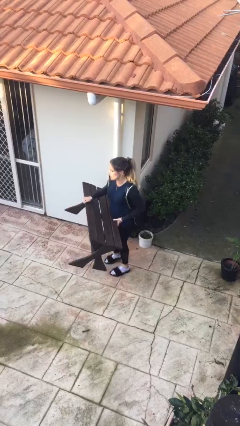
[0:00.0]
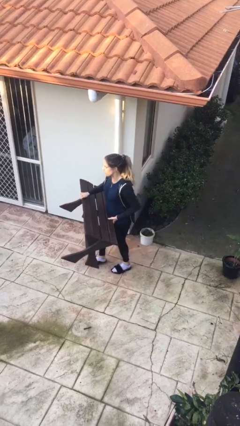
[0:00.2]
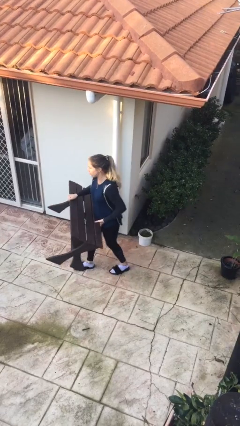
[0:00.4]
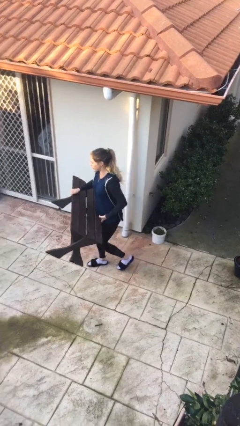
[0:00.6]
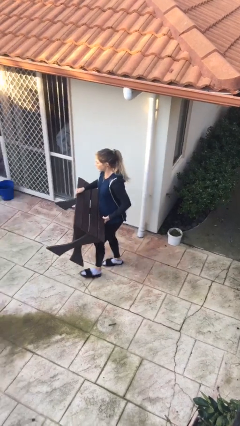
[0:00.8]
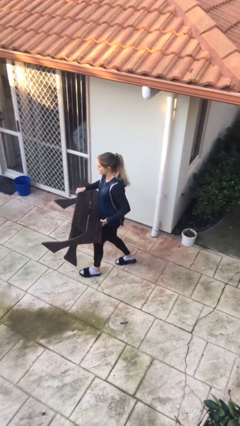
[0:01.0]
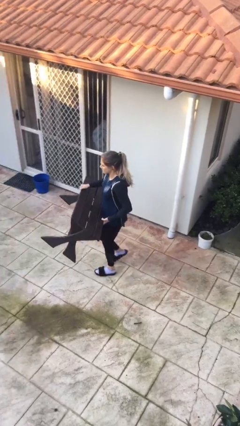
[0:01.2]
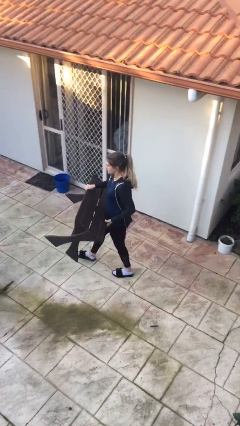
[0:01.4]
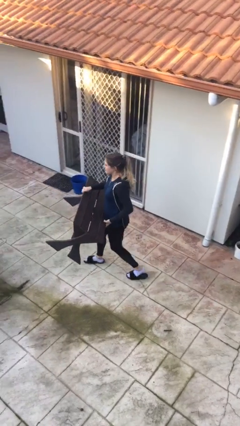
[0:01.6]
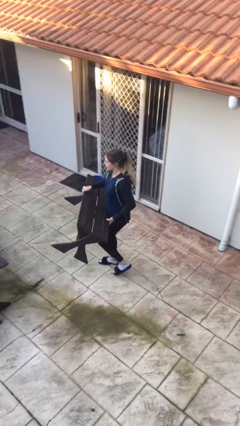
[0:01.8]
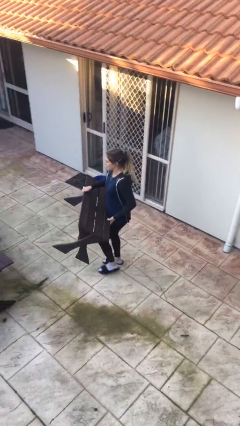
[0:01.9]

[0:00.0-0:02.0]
person carries heavy object

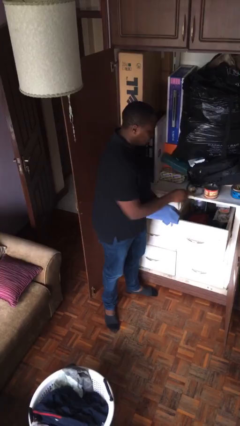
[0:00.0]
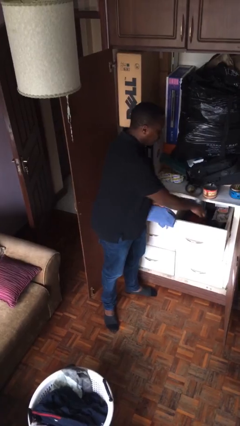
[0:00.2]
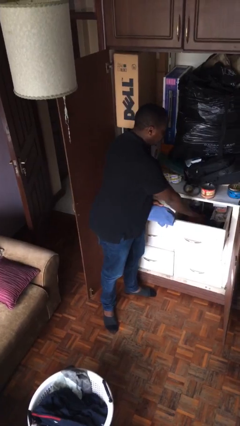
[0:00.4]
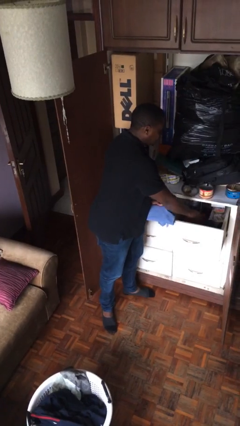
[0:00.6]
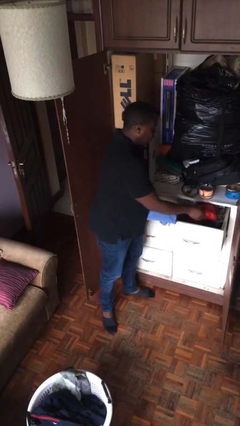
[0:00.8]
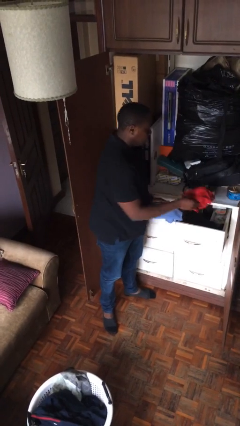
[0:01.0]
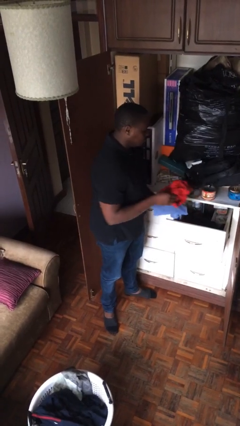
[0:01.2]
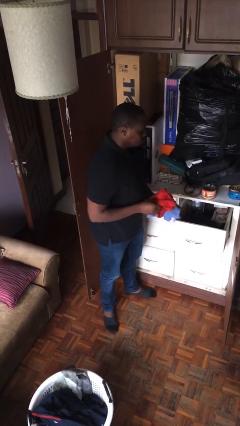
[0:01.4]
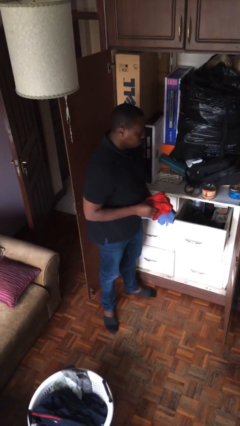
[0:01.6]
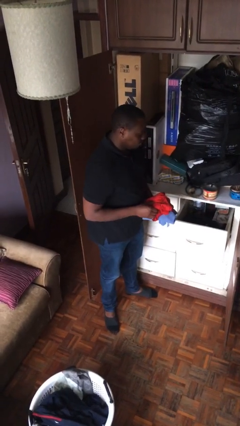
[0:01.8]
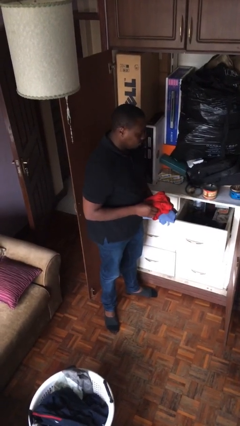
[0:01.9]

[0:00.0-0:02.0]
person takes clothes from dresser

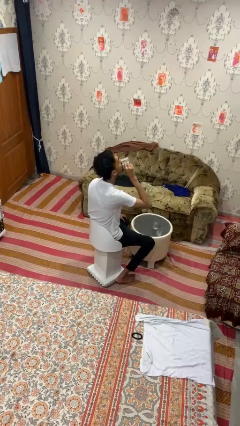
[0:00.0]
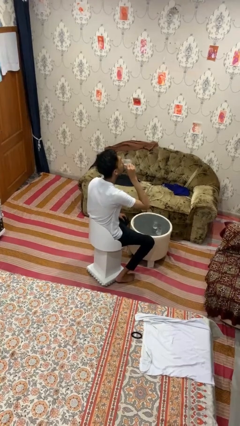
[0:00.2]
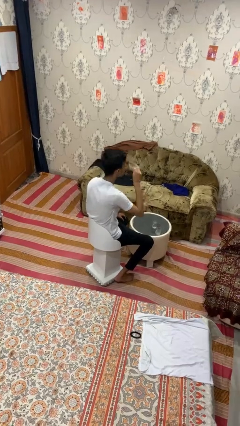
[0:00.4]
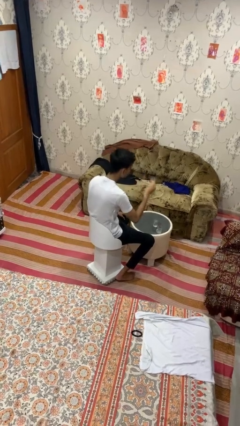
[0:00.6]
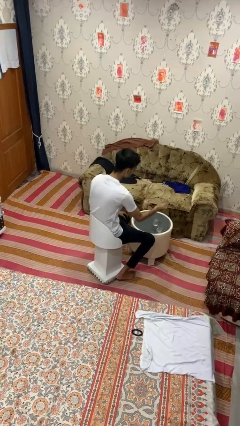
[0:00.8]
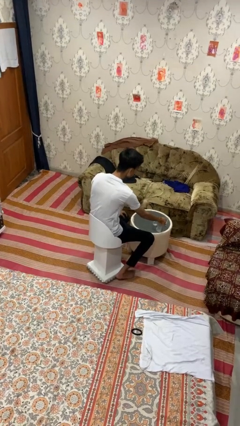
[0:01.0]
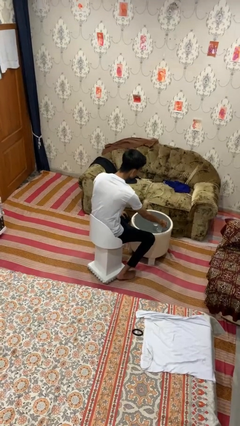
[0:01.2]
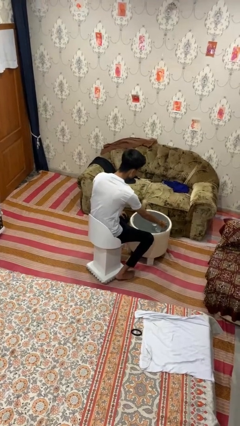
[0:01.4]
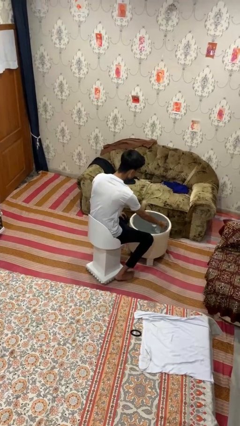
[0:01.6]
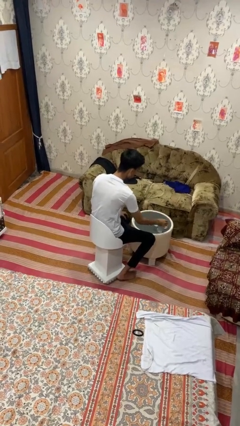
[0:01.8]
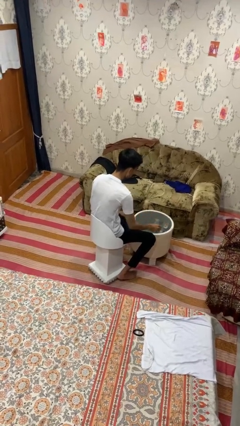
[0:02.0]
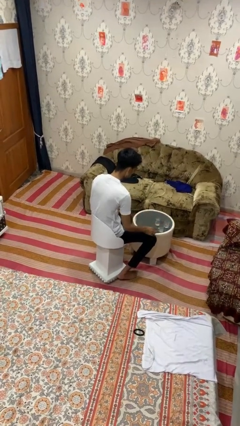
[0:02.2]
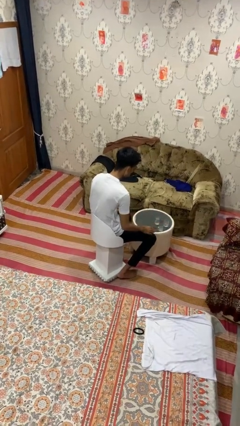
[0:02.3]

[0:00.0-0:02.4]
person puts down object on table

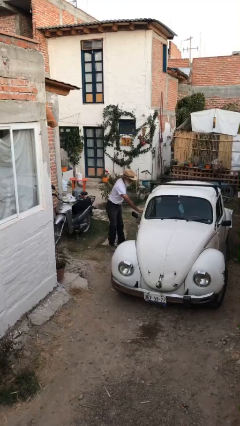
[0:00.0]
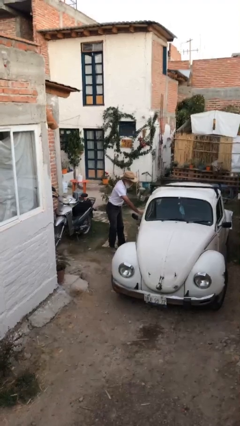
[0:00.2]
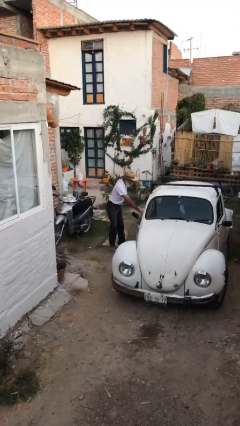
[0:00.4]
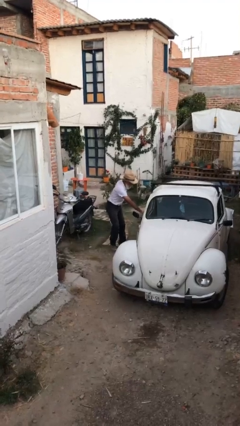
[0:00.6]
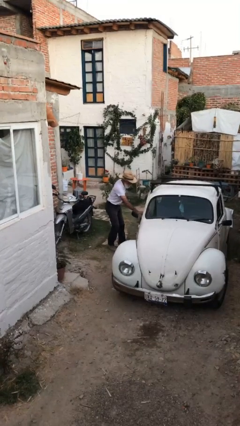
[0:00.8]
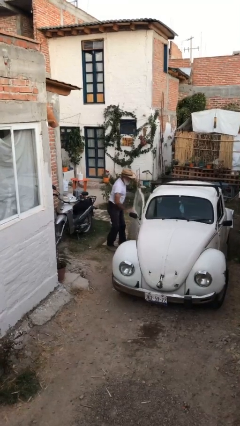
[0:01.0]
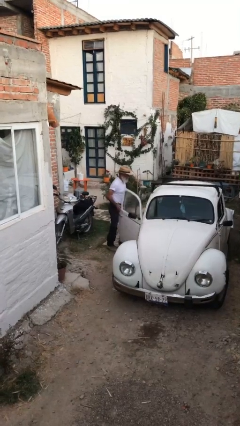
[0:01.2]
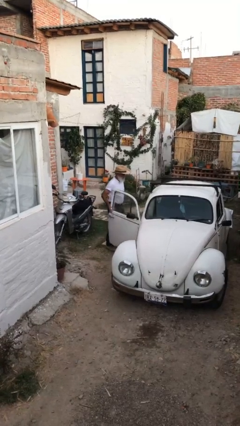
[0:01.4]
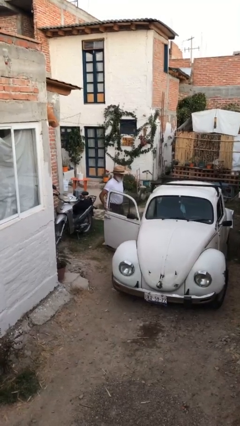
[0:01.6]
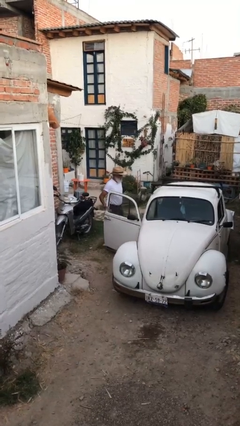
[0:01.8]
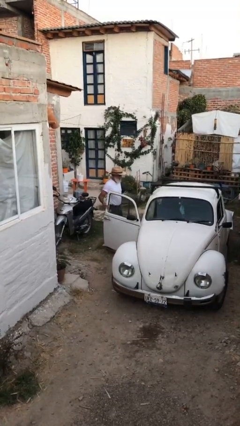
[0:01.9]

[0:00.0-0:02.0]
person opens car door

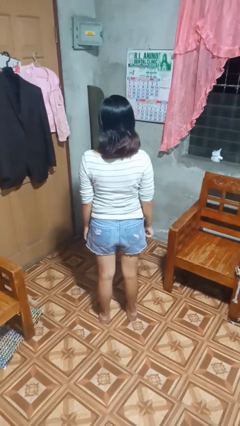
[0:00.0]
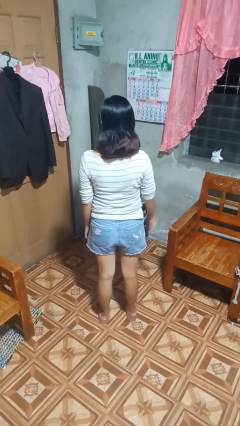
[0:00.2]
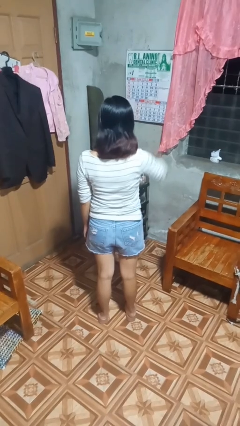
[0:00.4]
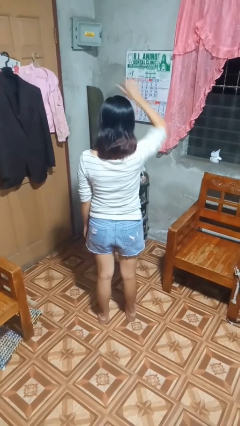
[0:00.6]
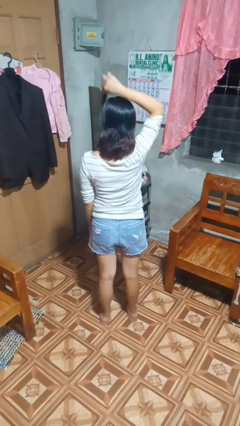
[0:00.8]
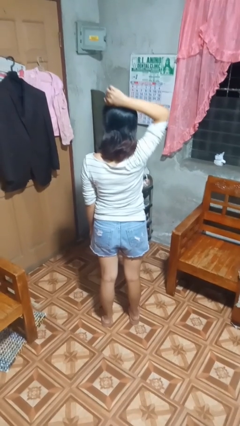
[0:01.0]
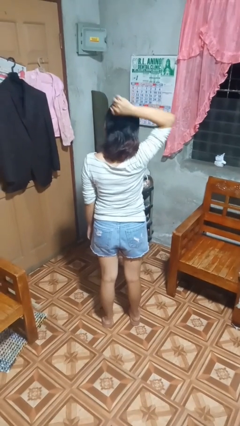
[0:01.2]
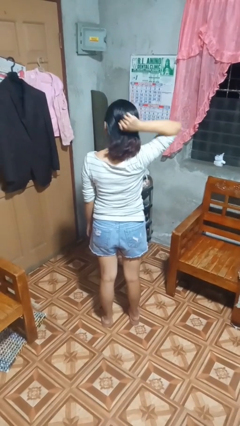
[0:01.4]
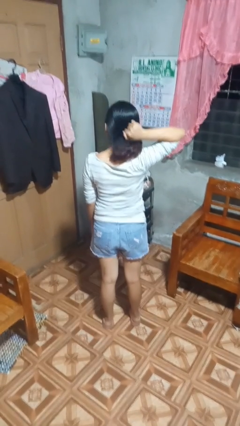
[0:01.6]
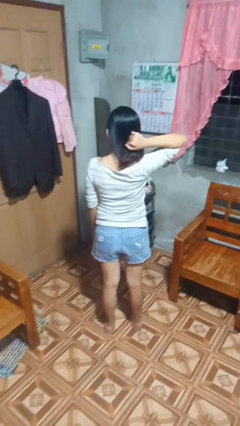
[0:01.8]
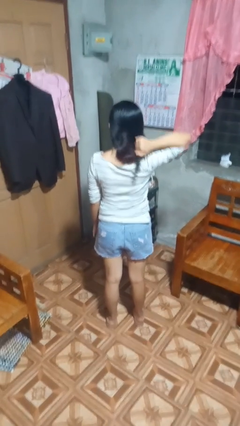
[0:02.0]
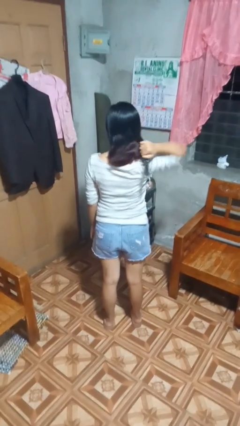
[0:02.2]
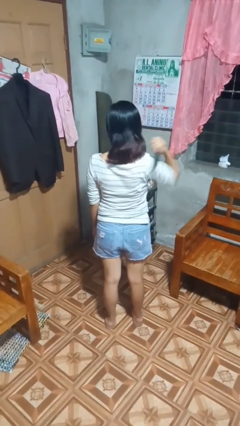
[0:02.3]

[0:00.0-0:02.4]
person brushes hair

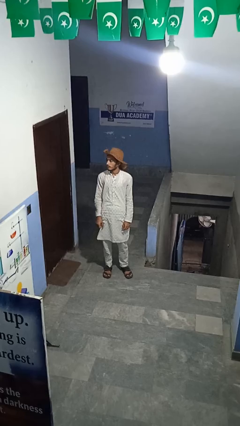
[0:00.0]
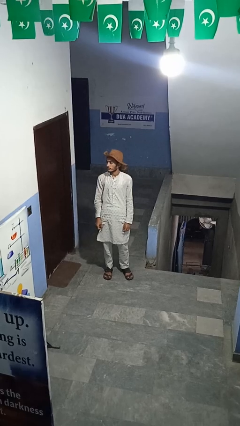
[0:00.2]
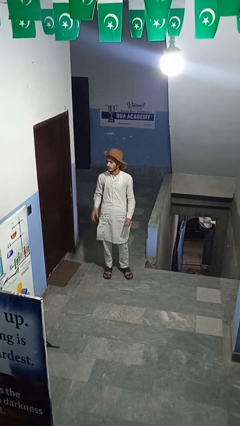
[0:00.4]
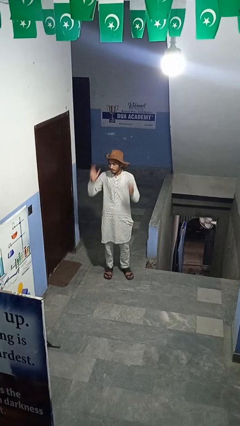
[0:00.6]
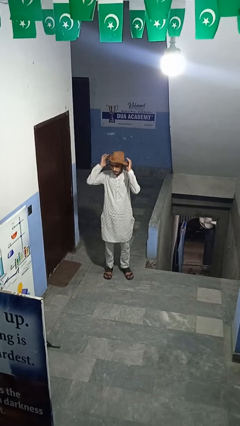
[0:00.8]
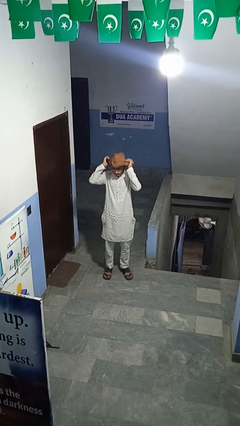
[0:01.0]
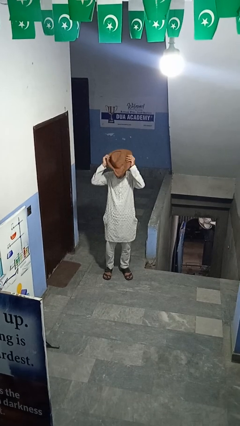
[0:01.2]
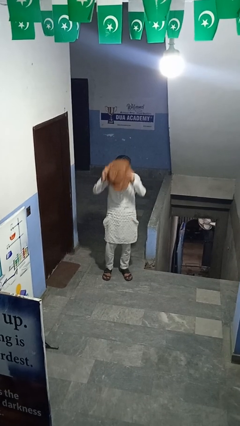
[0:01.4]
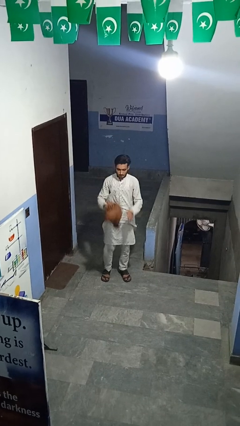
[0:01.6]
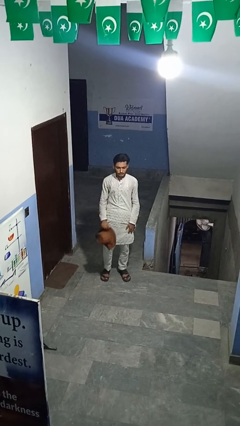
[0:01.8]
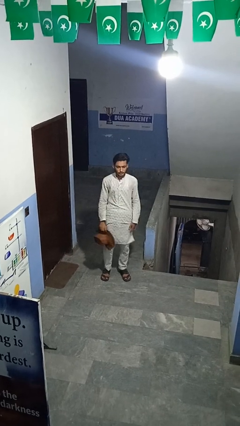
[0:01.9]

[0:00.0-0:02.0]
person takes off hat

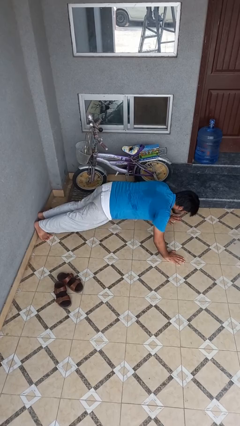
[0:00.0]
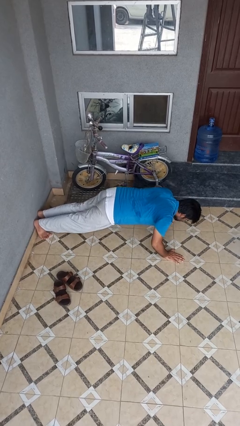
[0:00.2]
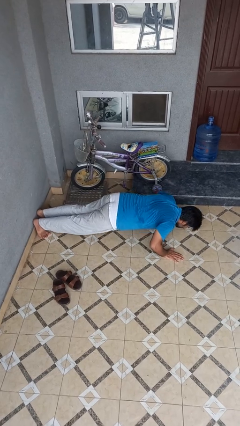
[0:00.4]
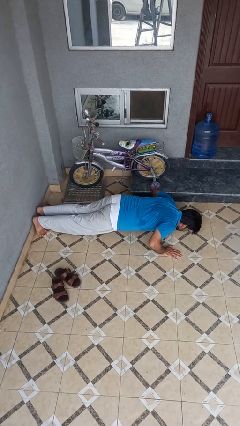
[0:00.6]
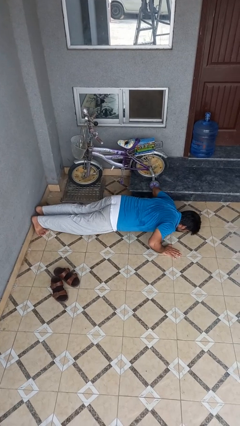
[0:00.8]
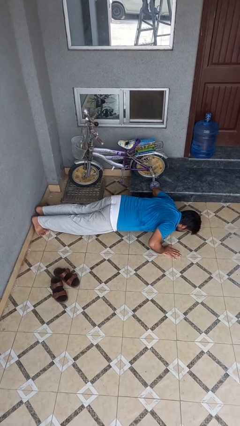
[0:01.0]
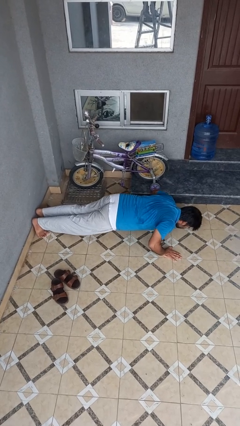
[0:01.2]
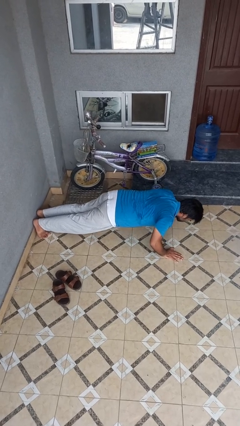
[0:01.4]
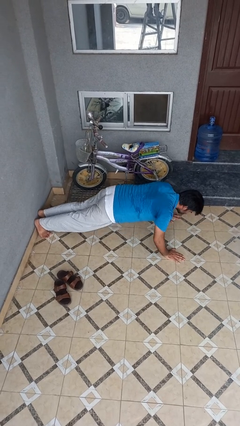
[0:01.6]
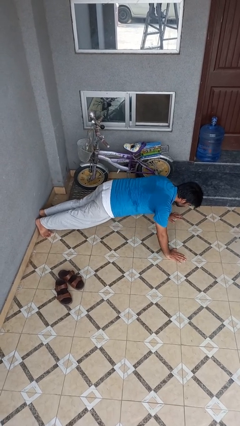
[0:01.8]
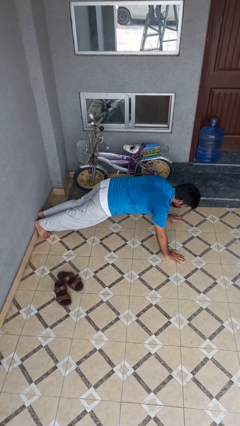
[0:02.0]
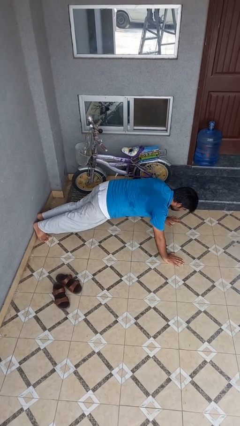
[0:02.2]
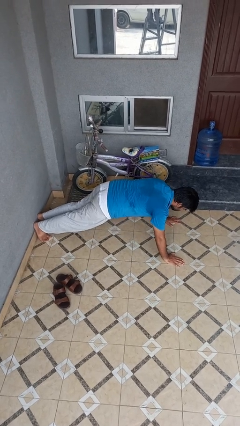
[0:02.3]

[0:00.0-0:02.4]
person exercises with pushup

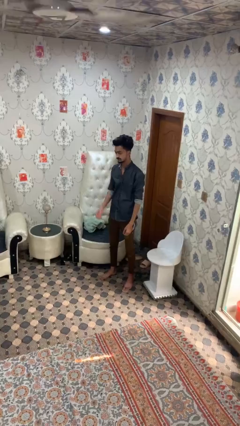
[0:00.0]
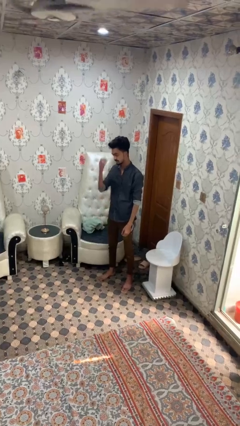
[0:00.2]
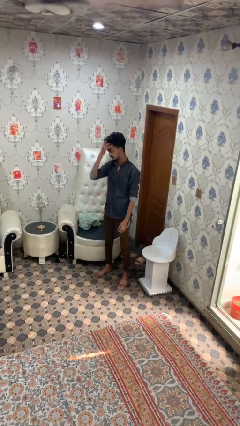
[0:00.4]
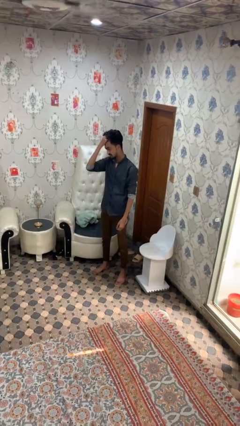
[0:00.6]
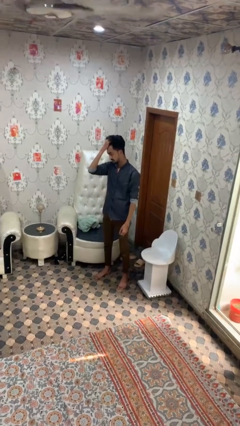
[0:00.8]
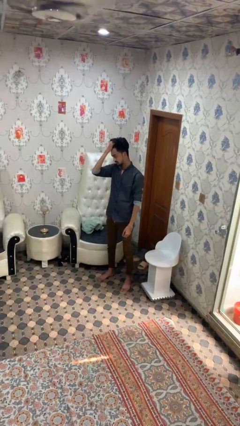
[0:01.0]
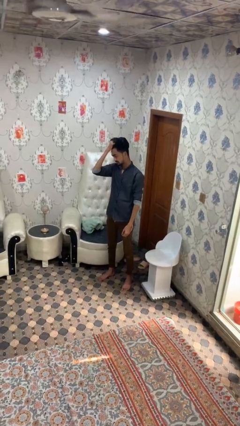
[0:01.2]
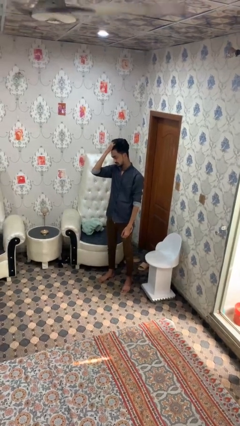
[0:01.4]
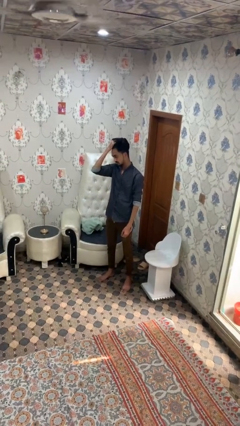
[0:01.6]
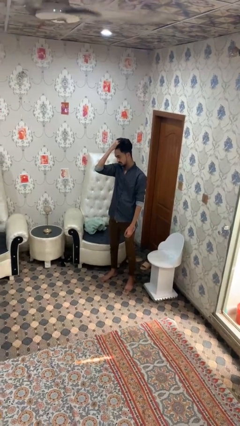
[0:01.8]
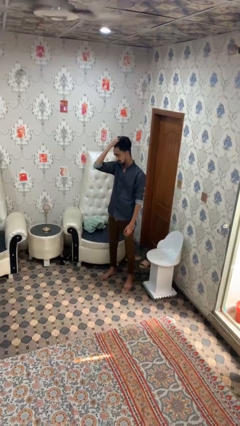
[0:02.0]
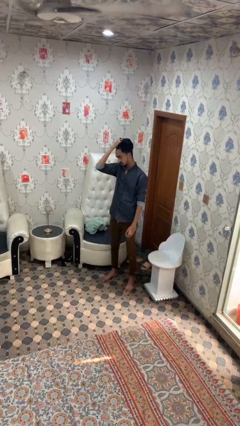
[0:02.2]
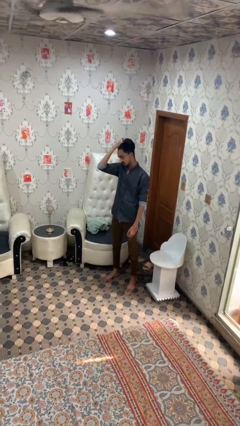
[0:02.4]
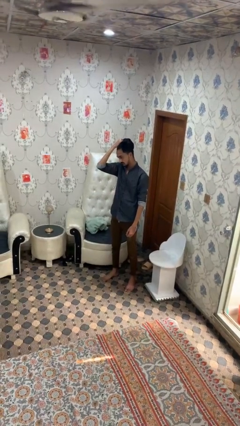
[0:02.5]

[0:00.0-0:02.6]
person strokes hair
